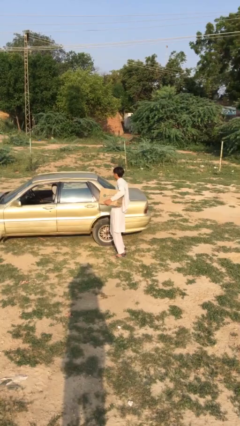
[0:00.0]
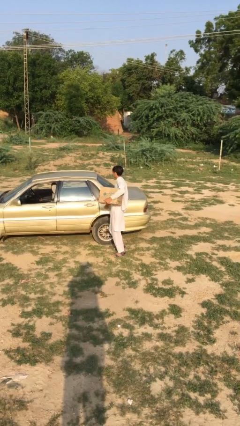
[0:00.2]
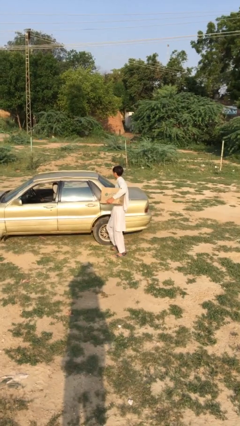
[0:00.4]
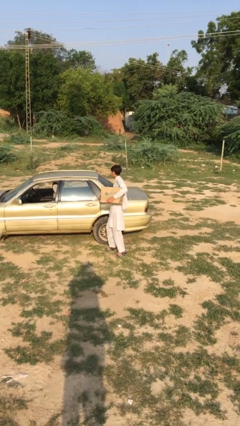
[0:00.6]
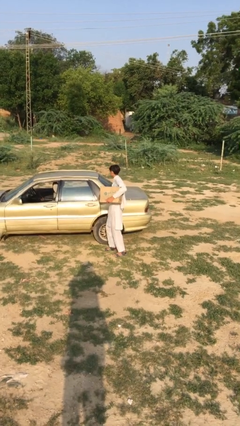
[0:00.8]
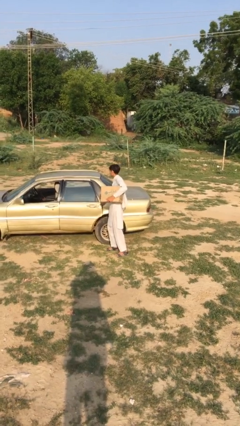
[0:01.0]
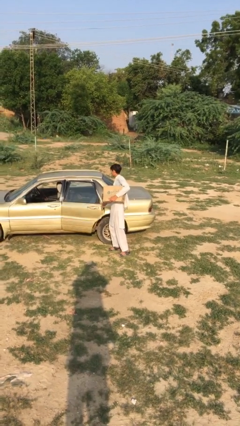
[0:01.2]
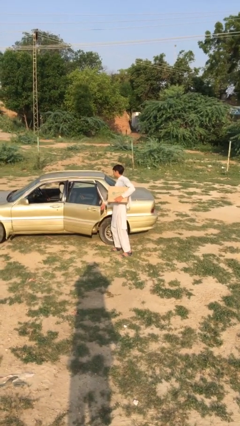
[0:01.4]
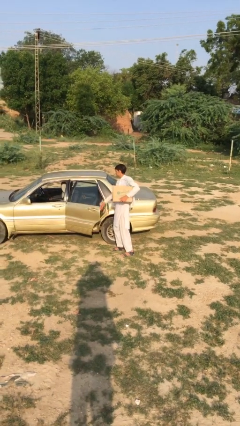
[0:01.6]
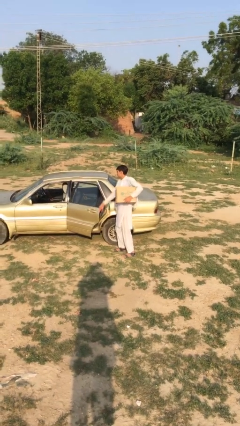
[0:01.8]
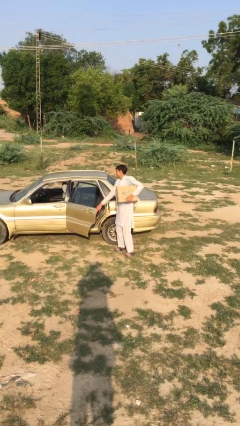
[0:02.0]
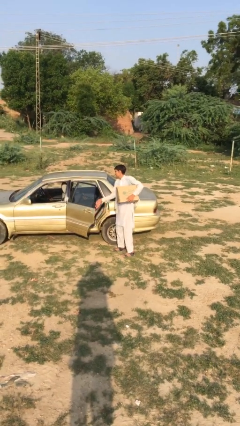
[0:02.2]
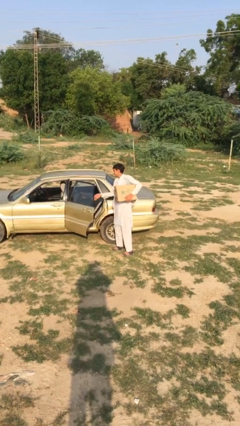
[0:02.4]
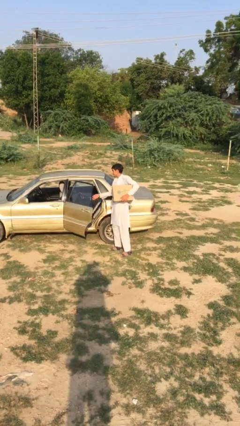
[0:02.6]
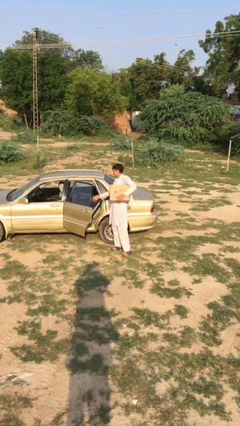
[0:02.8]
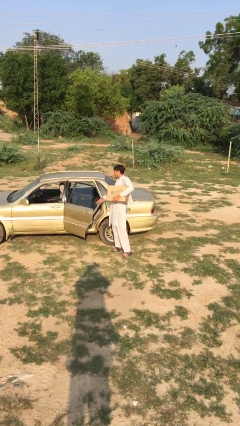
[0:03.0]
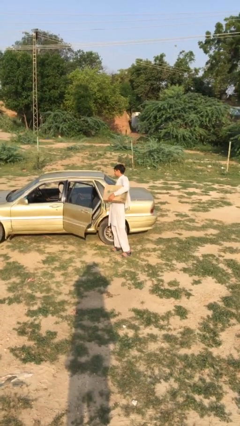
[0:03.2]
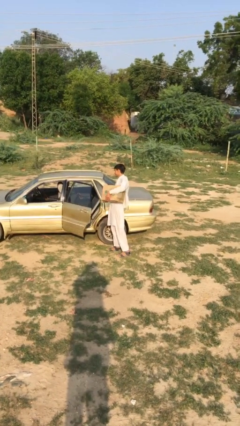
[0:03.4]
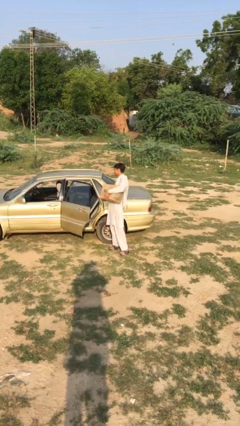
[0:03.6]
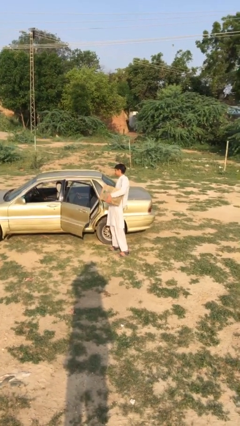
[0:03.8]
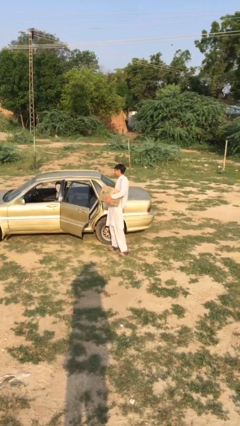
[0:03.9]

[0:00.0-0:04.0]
person opens car door

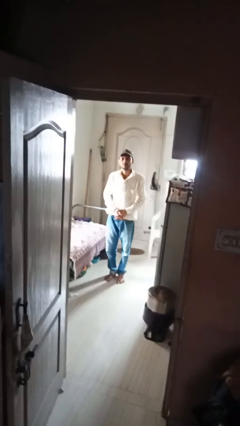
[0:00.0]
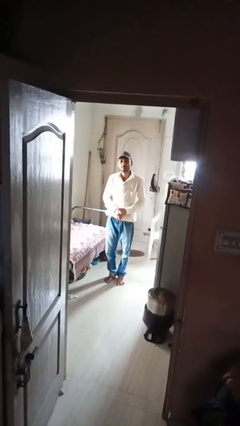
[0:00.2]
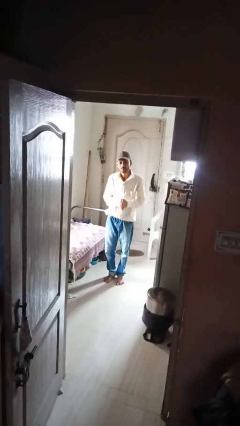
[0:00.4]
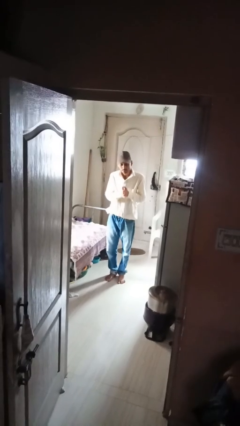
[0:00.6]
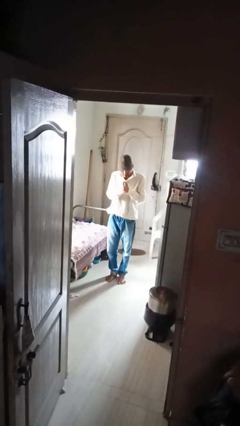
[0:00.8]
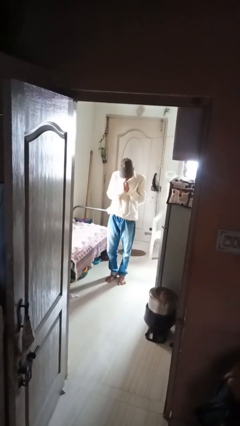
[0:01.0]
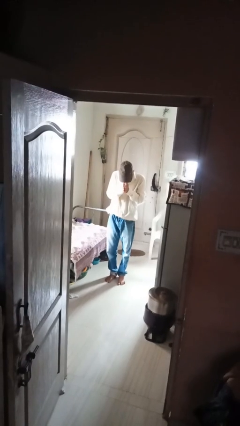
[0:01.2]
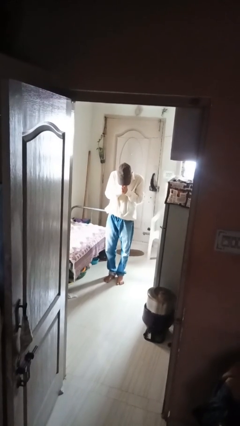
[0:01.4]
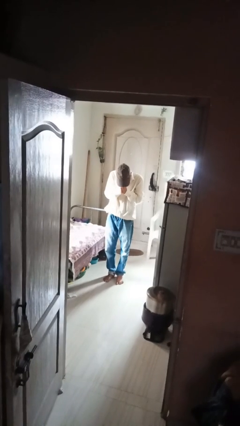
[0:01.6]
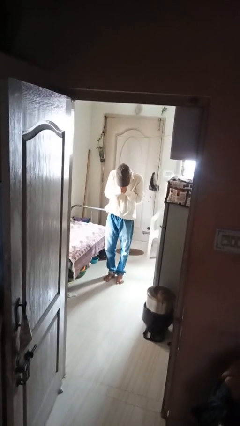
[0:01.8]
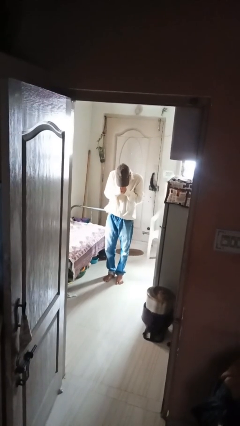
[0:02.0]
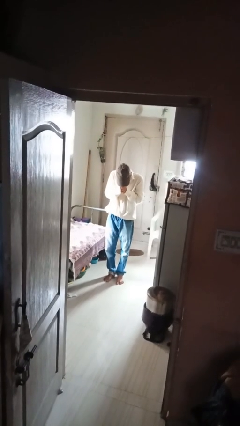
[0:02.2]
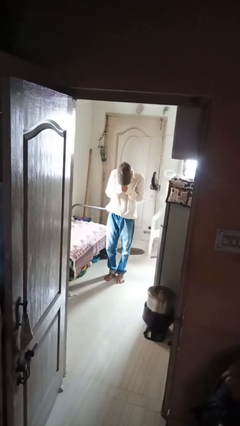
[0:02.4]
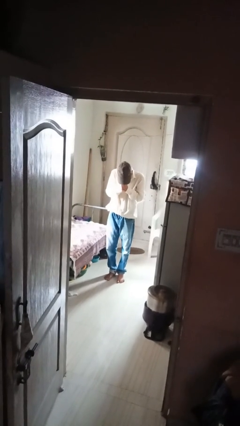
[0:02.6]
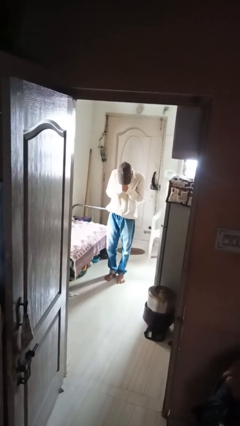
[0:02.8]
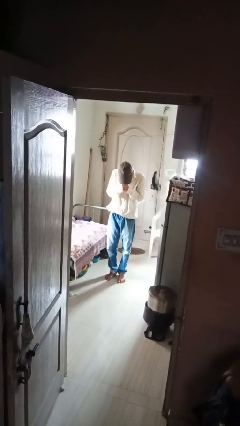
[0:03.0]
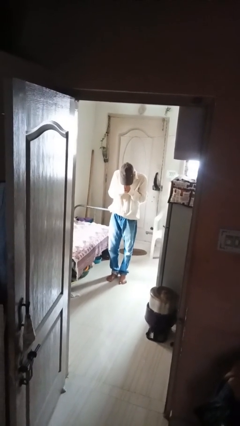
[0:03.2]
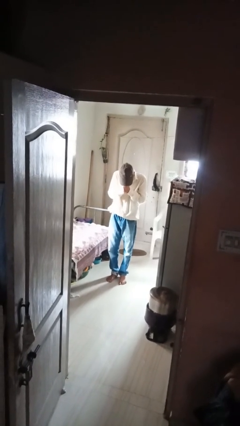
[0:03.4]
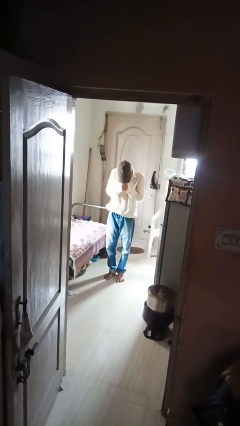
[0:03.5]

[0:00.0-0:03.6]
person prays

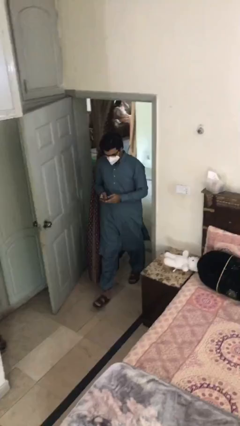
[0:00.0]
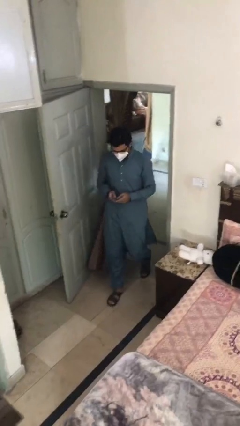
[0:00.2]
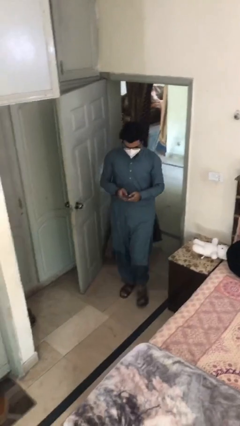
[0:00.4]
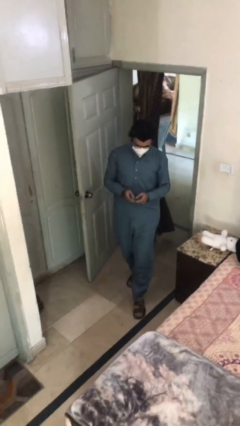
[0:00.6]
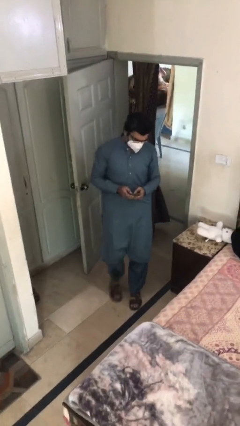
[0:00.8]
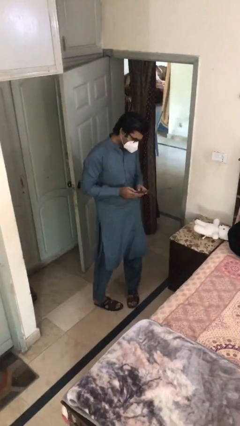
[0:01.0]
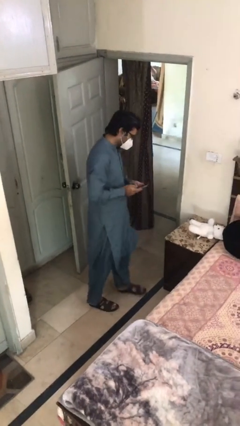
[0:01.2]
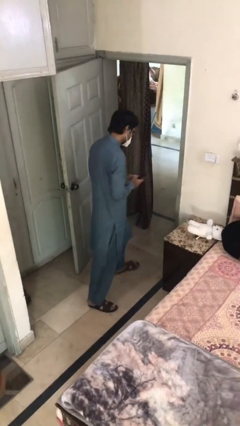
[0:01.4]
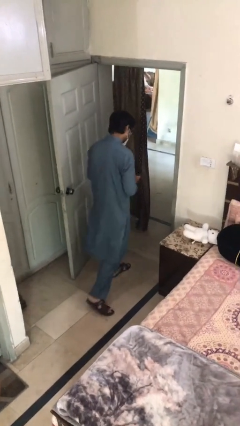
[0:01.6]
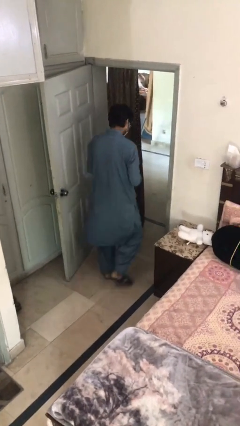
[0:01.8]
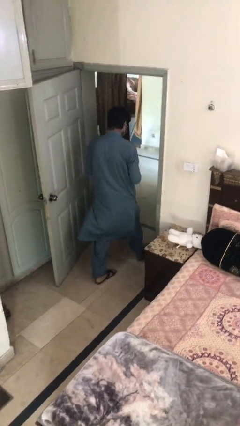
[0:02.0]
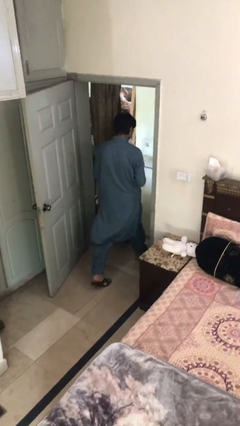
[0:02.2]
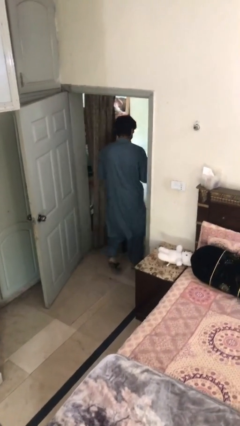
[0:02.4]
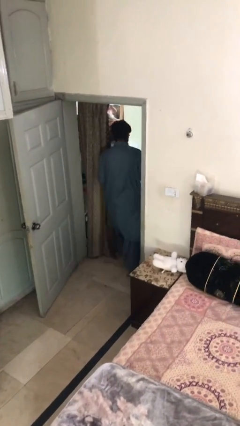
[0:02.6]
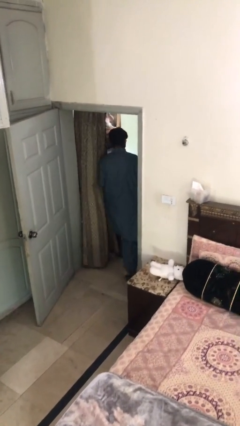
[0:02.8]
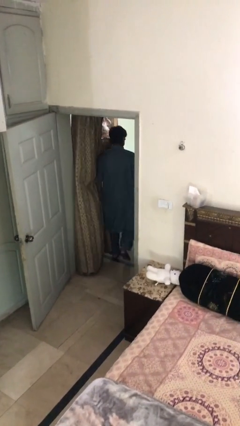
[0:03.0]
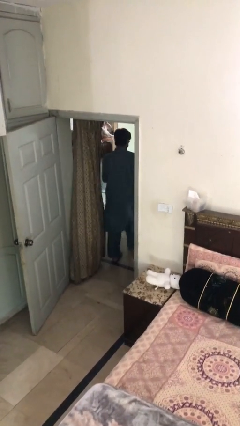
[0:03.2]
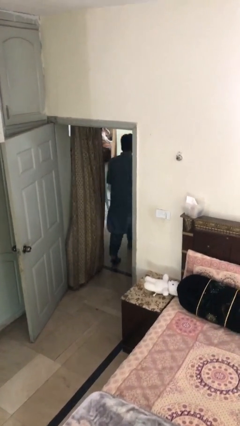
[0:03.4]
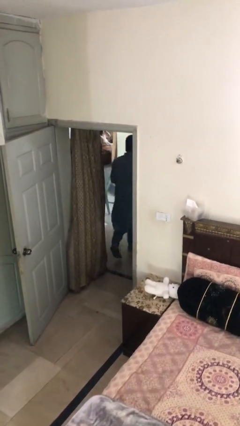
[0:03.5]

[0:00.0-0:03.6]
person exits scene through structure

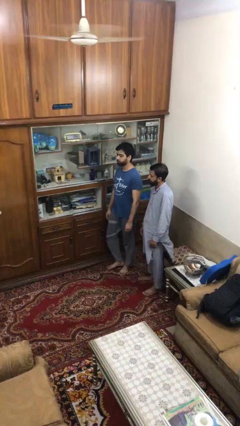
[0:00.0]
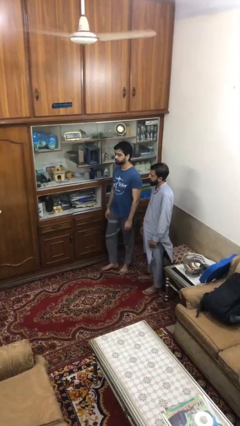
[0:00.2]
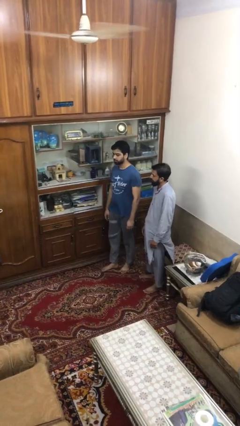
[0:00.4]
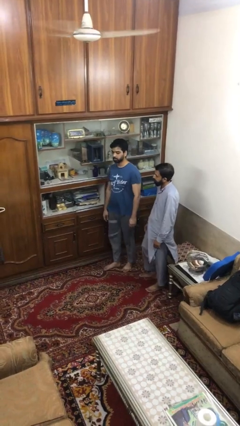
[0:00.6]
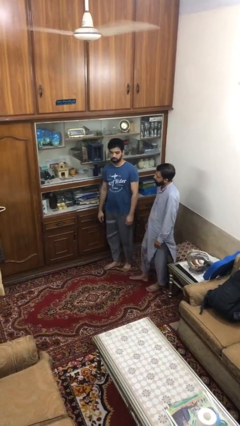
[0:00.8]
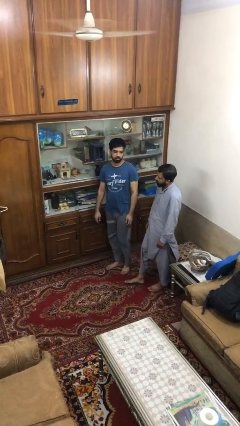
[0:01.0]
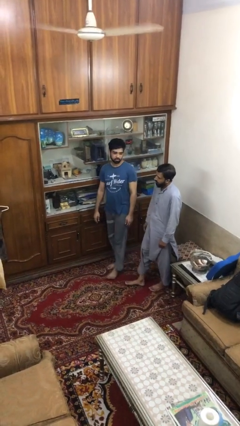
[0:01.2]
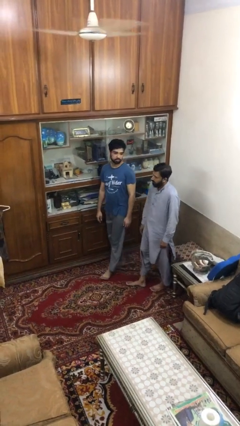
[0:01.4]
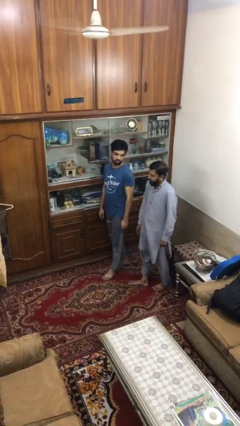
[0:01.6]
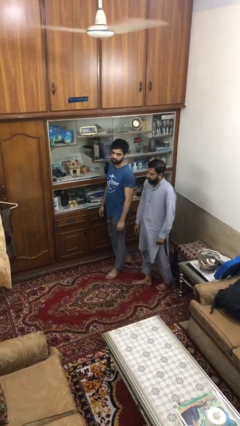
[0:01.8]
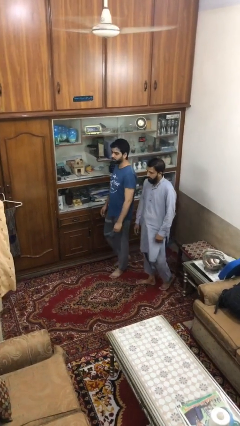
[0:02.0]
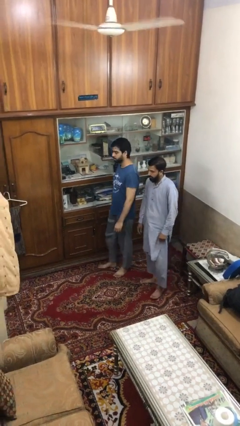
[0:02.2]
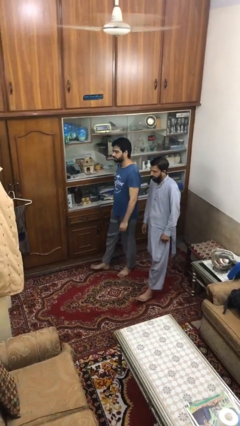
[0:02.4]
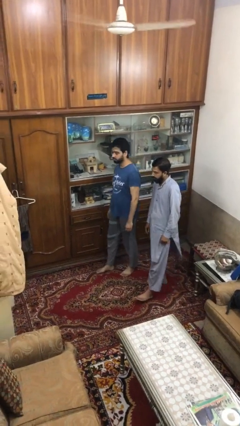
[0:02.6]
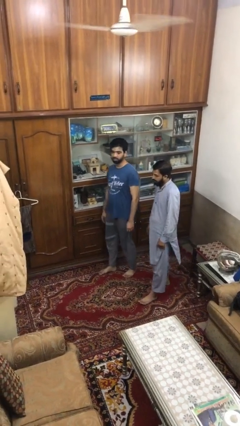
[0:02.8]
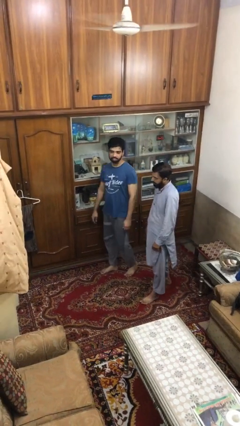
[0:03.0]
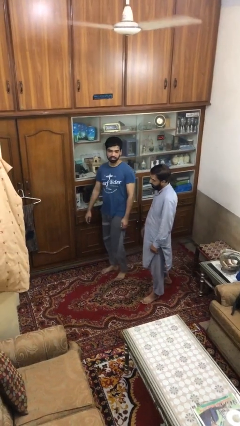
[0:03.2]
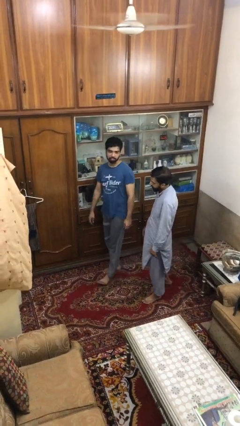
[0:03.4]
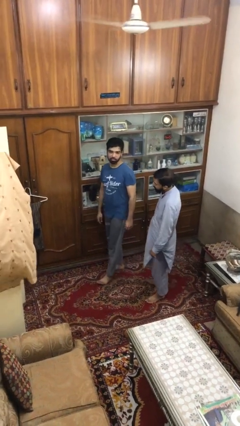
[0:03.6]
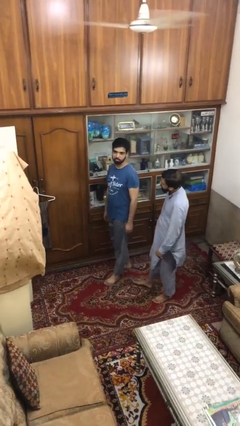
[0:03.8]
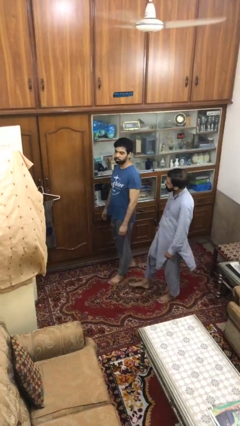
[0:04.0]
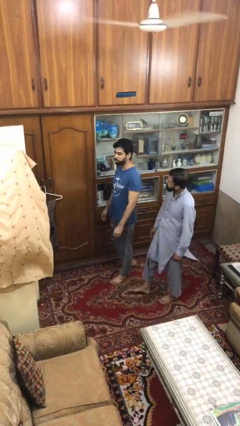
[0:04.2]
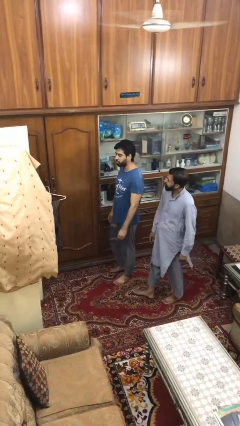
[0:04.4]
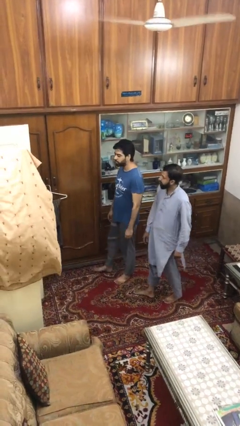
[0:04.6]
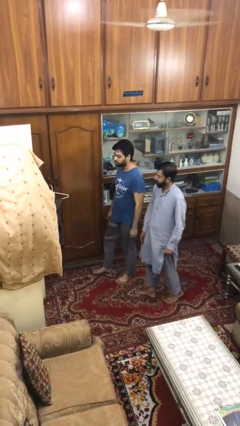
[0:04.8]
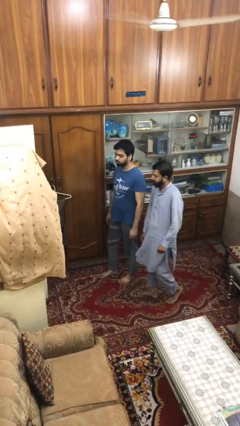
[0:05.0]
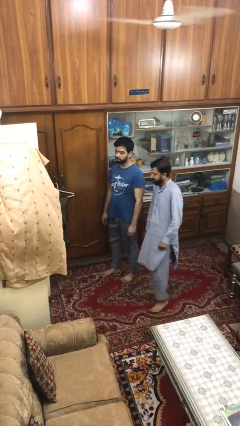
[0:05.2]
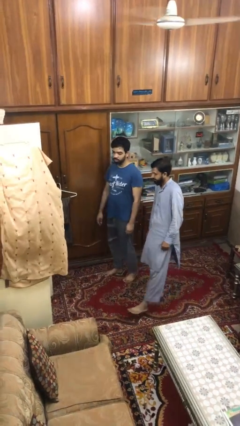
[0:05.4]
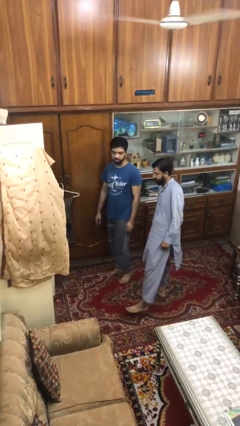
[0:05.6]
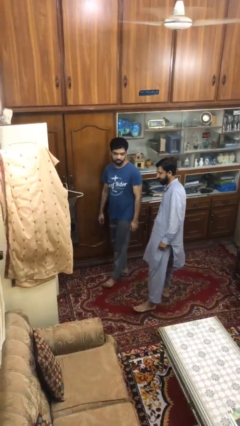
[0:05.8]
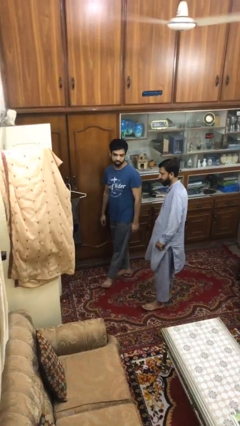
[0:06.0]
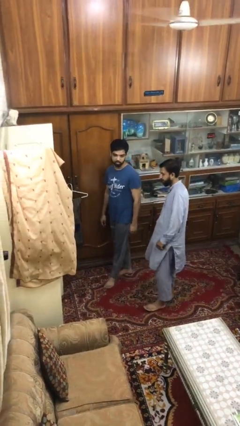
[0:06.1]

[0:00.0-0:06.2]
person talks to person

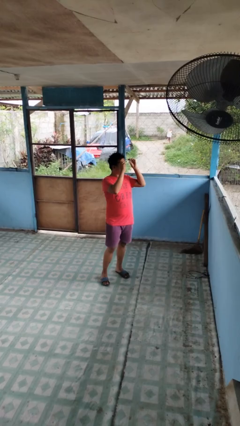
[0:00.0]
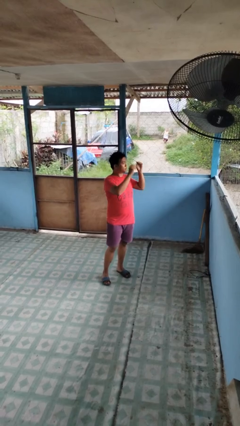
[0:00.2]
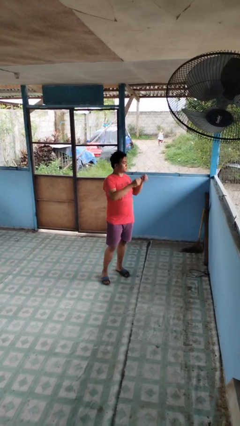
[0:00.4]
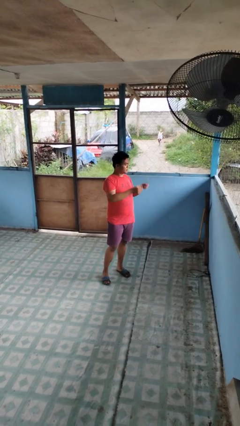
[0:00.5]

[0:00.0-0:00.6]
person takes off glasses
